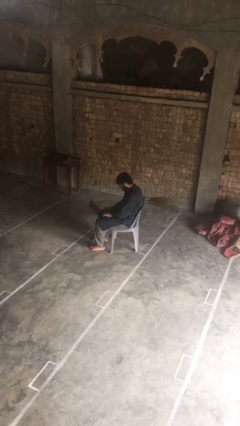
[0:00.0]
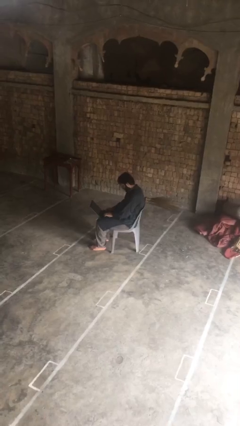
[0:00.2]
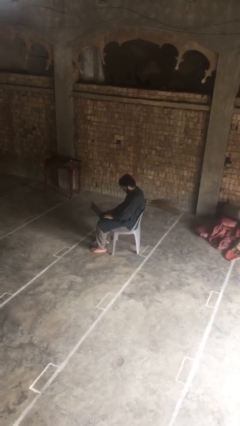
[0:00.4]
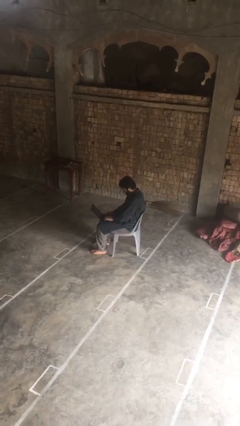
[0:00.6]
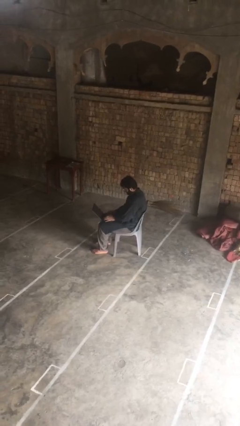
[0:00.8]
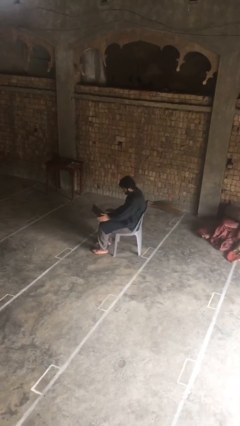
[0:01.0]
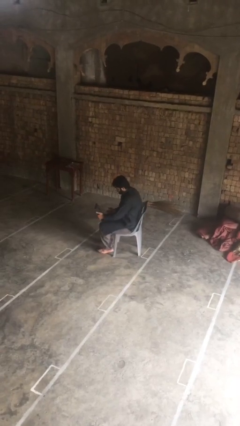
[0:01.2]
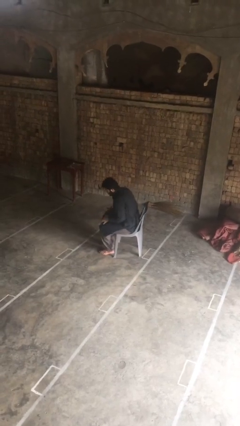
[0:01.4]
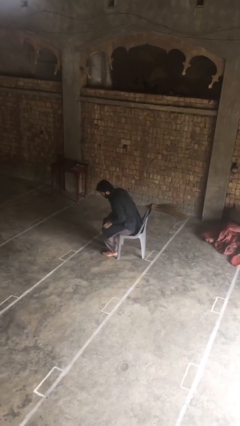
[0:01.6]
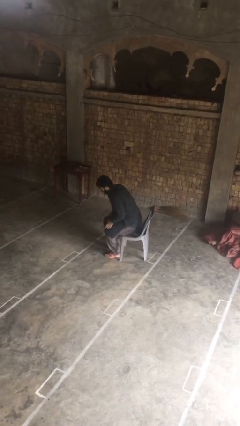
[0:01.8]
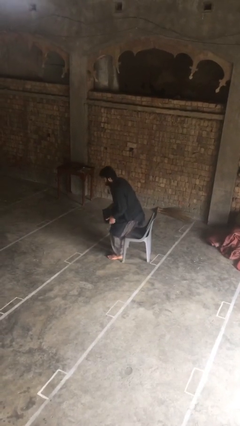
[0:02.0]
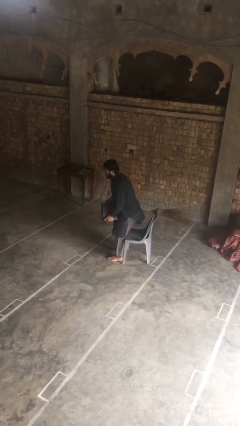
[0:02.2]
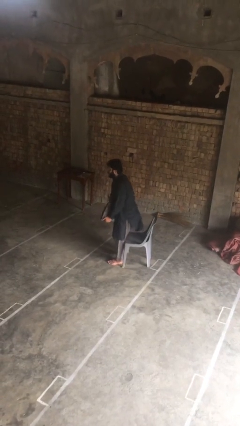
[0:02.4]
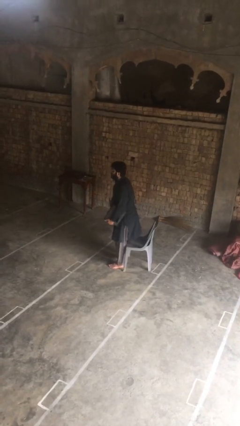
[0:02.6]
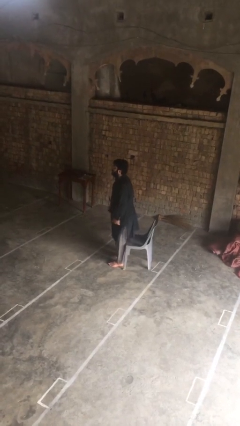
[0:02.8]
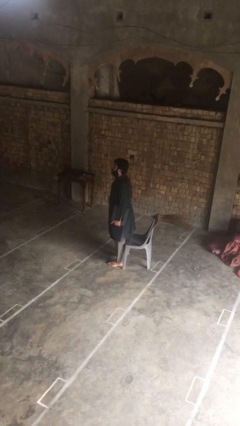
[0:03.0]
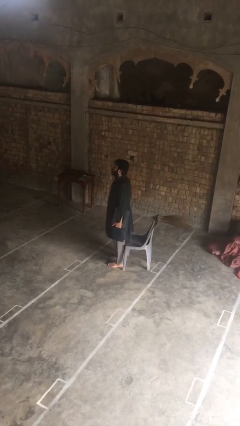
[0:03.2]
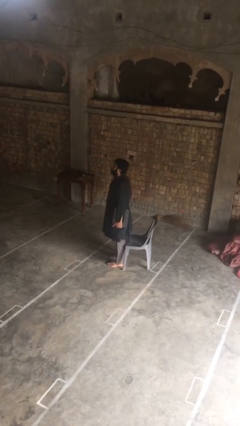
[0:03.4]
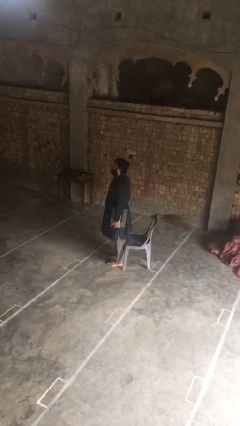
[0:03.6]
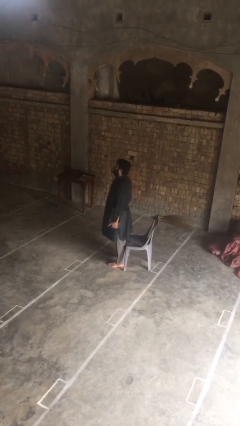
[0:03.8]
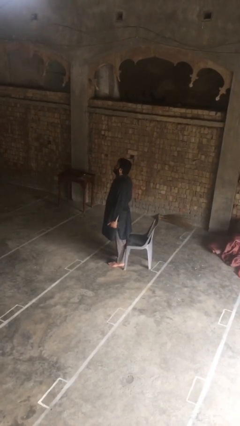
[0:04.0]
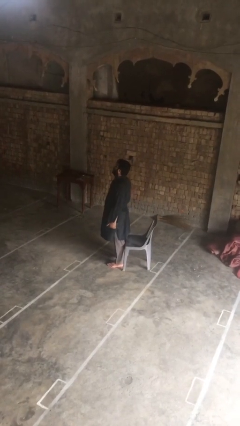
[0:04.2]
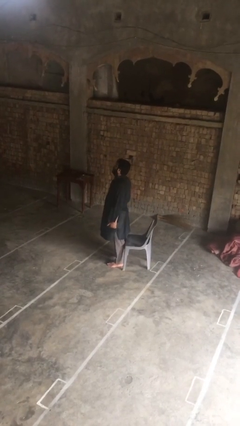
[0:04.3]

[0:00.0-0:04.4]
person stands up

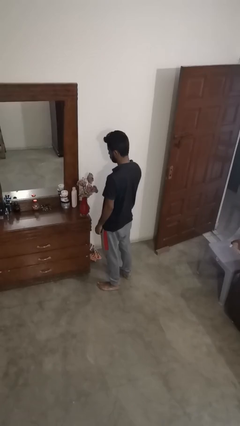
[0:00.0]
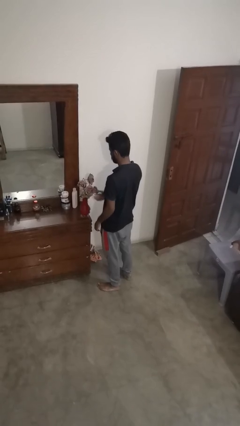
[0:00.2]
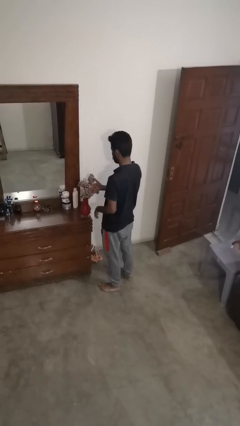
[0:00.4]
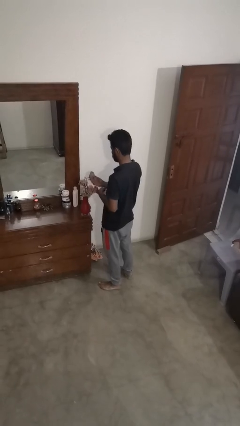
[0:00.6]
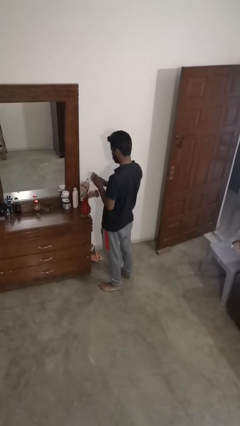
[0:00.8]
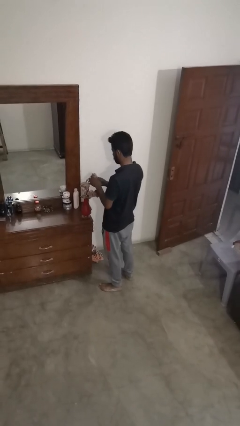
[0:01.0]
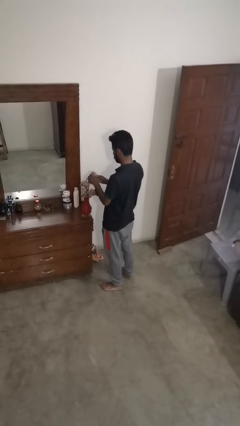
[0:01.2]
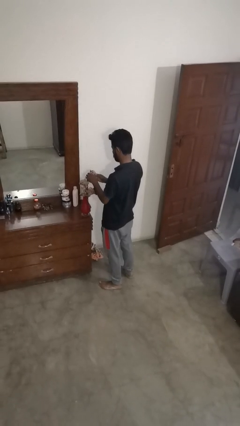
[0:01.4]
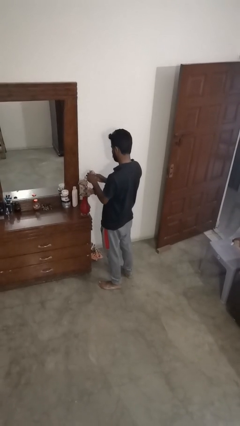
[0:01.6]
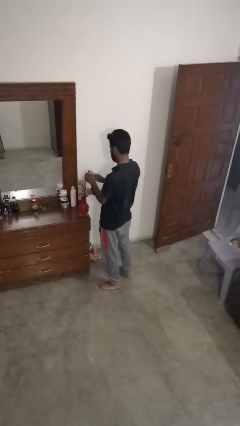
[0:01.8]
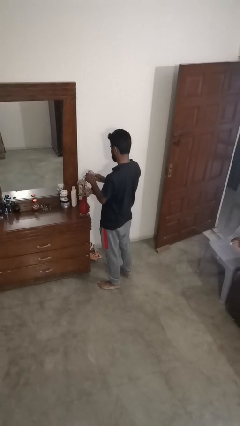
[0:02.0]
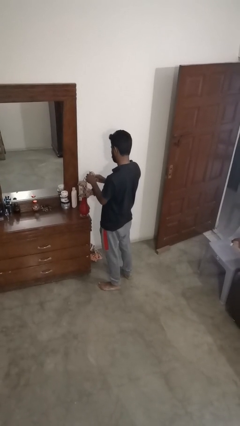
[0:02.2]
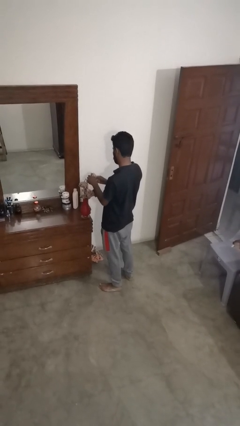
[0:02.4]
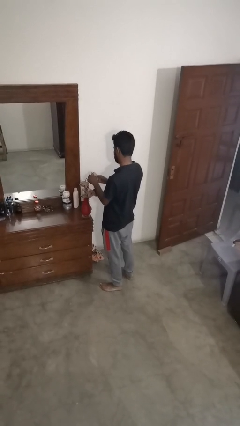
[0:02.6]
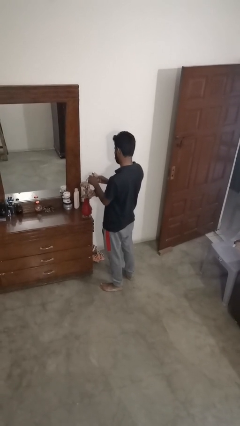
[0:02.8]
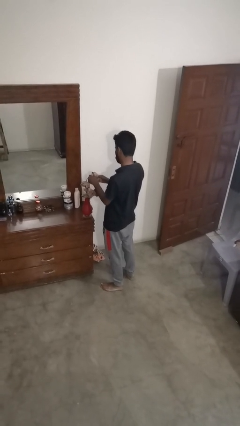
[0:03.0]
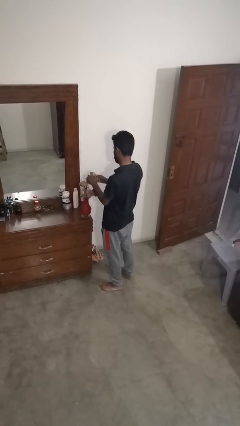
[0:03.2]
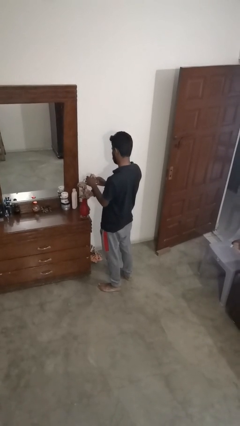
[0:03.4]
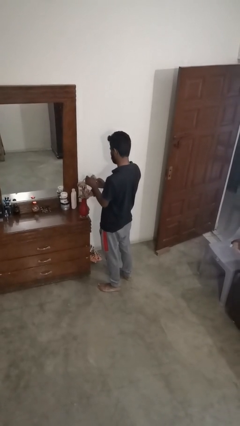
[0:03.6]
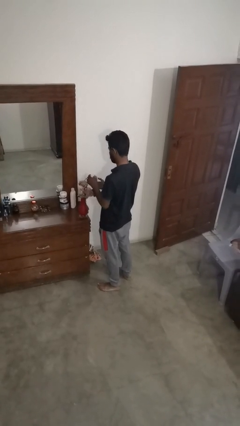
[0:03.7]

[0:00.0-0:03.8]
person arranges flowers in vase

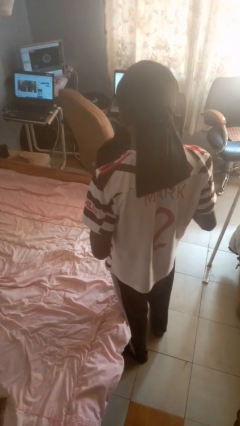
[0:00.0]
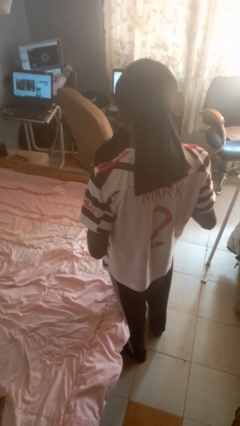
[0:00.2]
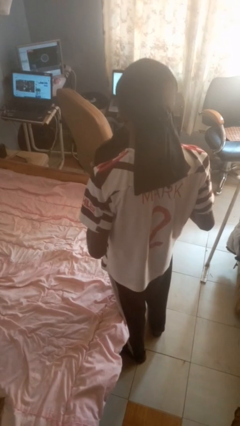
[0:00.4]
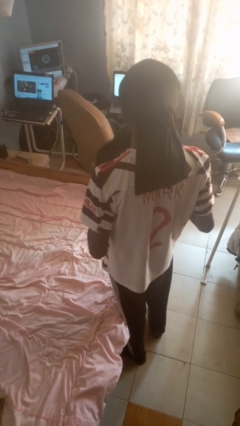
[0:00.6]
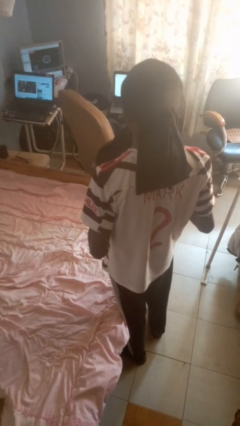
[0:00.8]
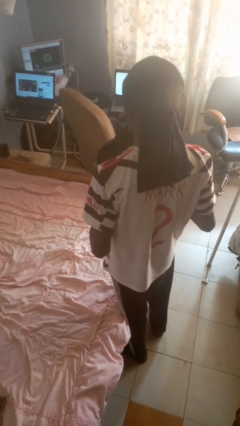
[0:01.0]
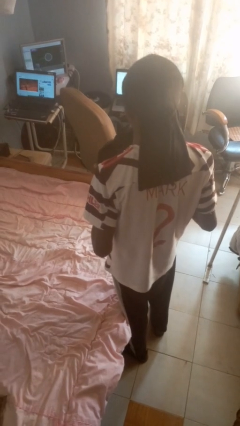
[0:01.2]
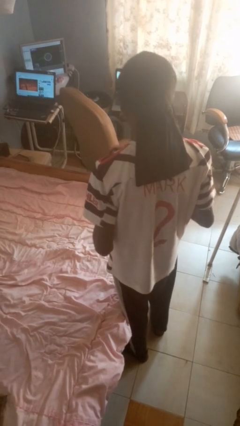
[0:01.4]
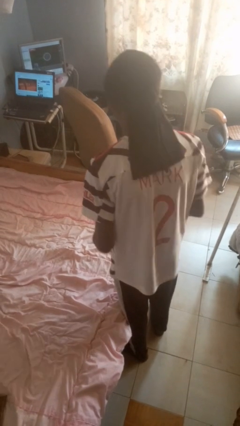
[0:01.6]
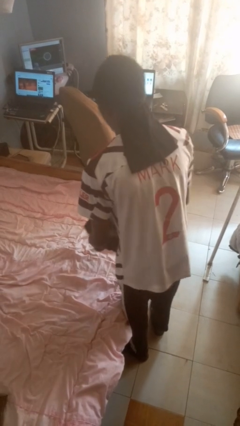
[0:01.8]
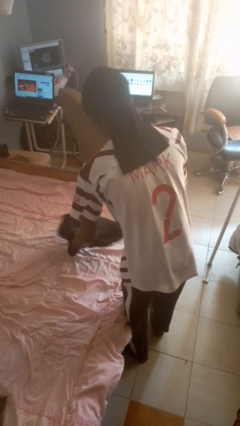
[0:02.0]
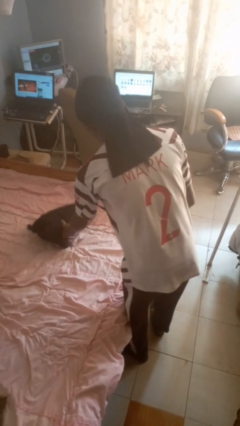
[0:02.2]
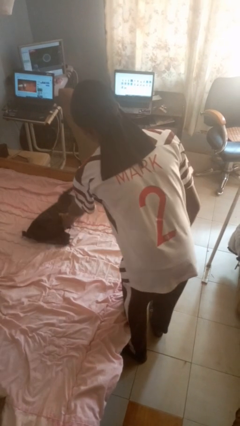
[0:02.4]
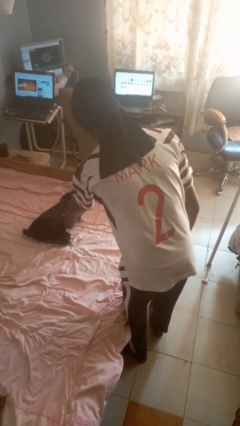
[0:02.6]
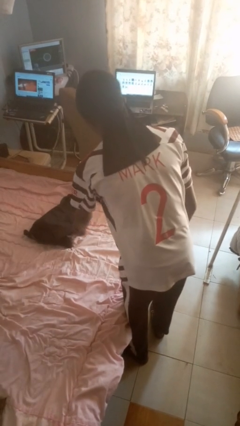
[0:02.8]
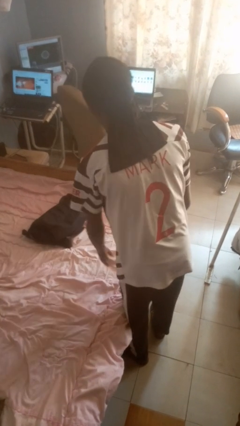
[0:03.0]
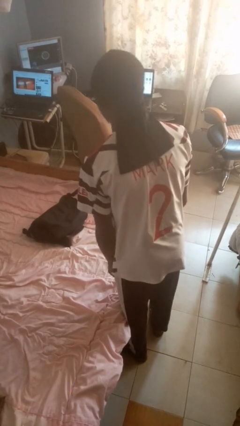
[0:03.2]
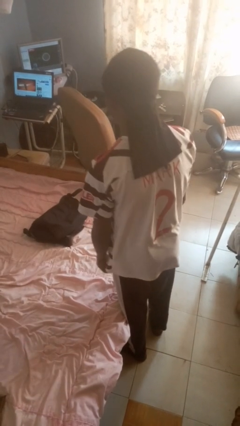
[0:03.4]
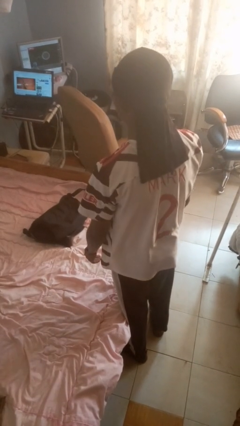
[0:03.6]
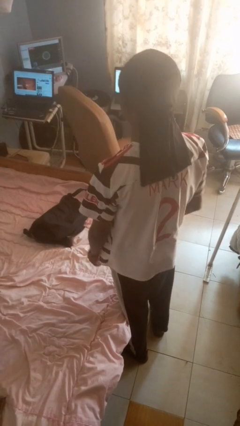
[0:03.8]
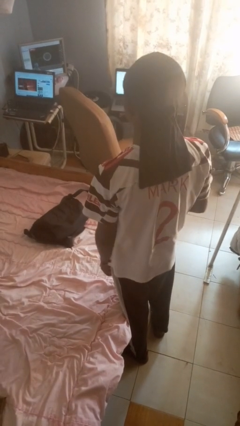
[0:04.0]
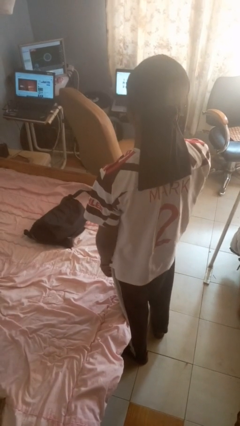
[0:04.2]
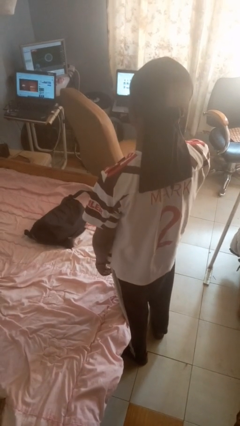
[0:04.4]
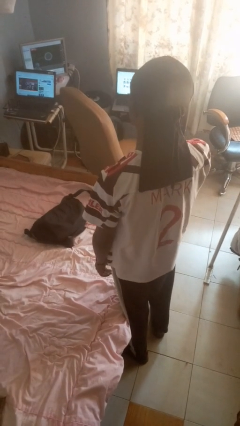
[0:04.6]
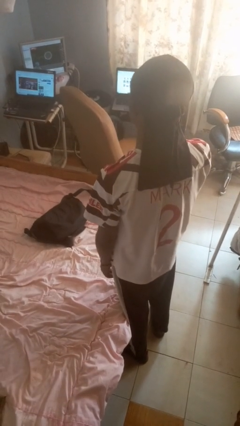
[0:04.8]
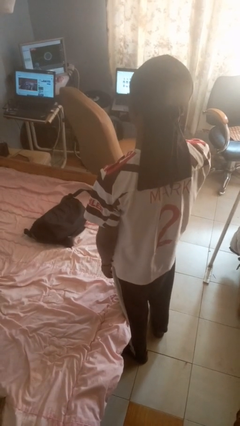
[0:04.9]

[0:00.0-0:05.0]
person puts down object on bed

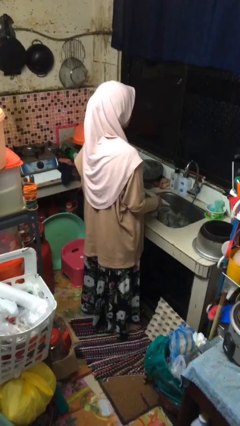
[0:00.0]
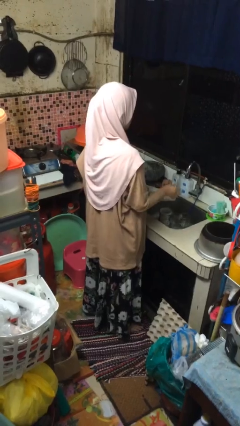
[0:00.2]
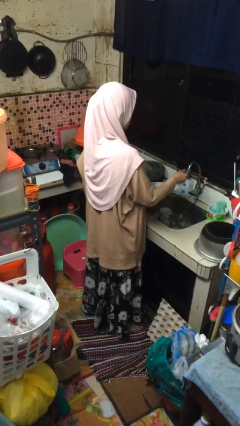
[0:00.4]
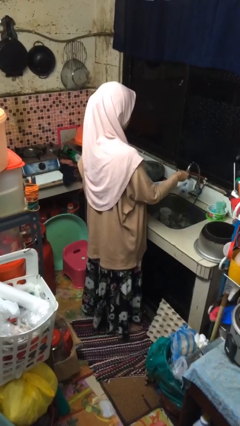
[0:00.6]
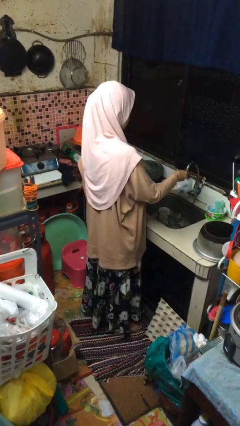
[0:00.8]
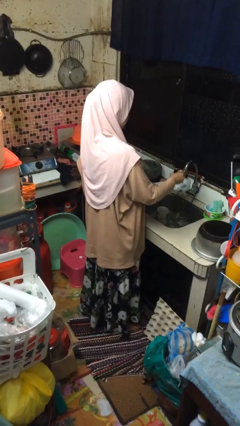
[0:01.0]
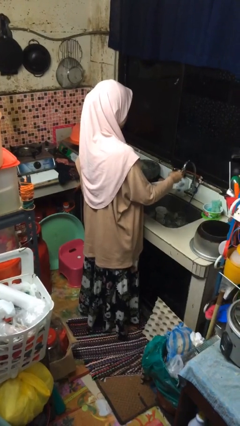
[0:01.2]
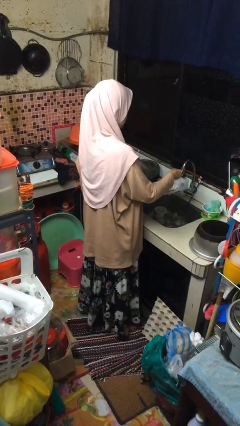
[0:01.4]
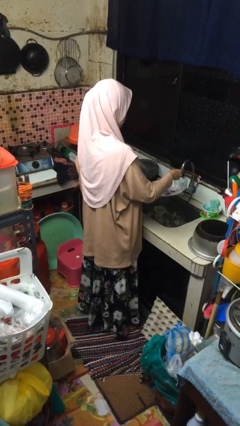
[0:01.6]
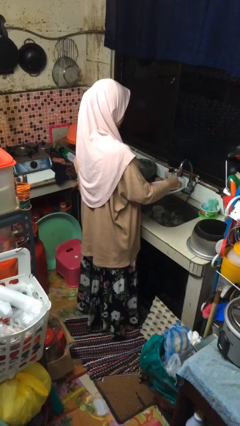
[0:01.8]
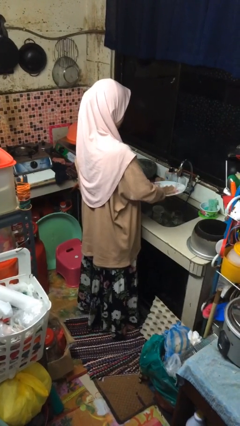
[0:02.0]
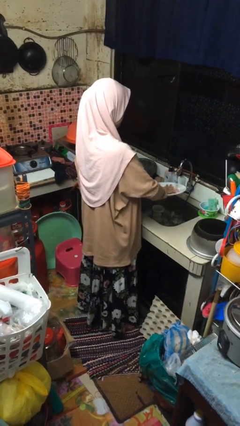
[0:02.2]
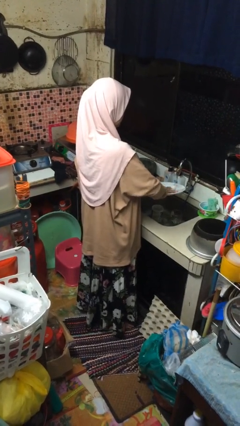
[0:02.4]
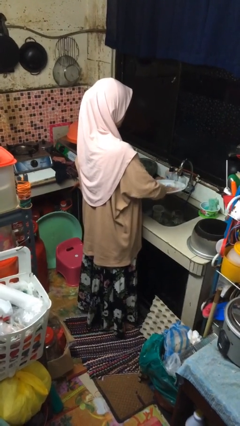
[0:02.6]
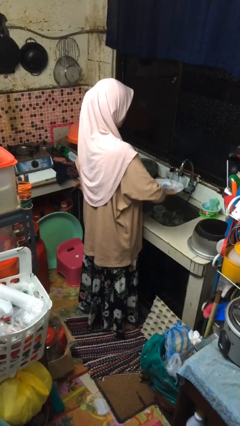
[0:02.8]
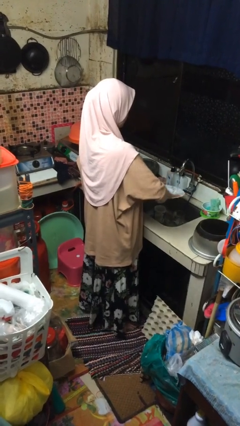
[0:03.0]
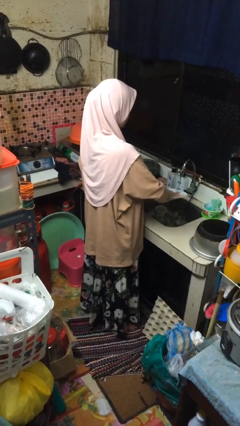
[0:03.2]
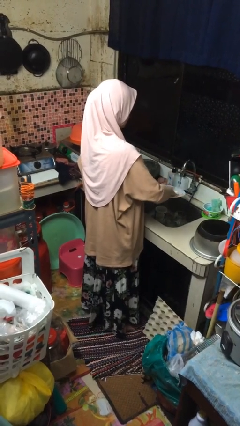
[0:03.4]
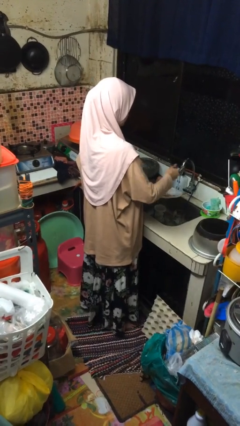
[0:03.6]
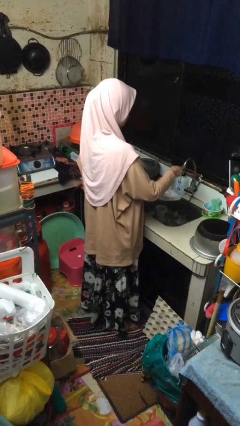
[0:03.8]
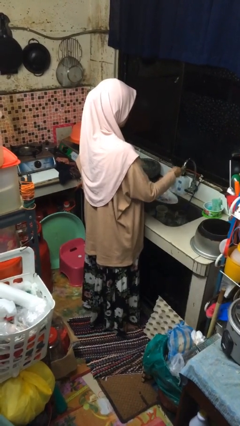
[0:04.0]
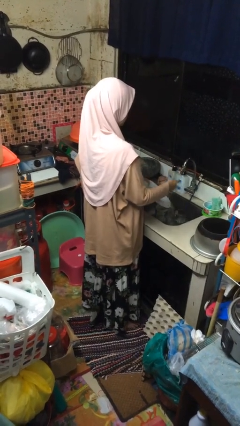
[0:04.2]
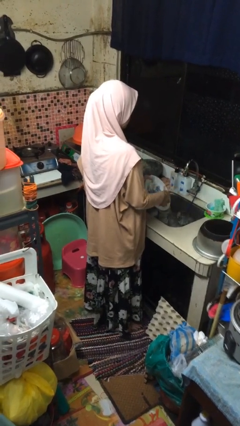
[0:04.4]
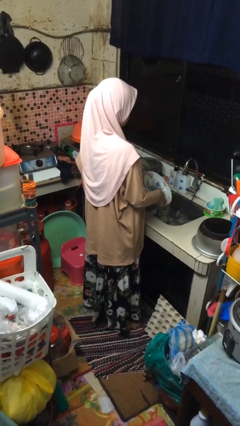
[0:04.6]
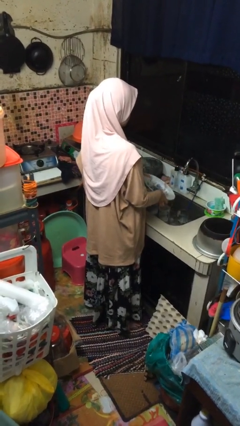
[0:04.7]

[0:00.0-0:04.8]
person washes dish
